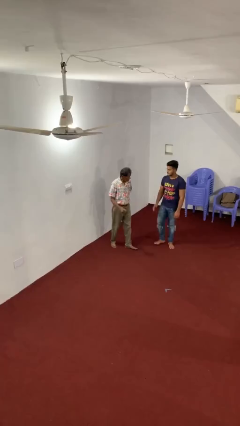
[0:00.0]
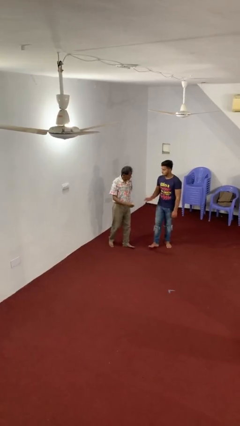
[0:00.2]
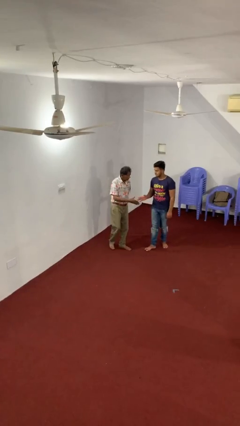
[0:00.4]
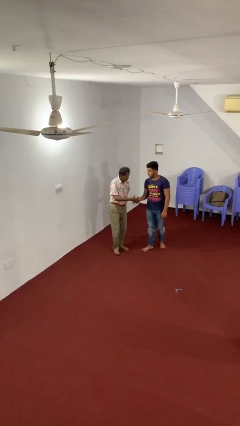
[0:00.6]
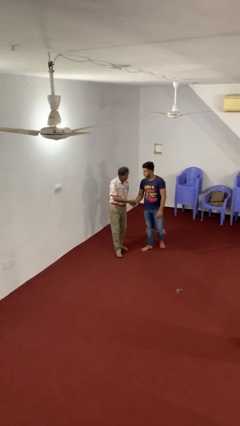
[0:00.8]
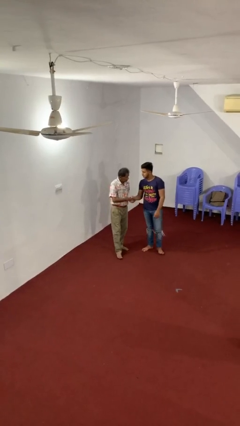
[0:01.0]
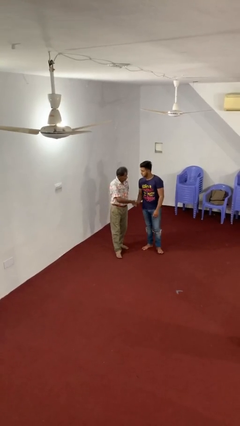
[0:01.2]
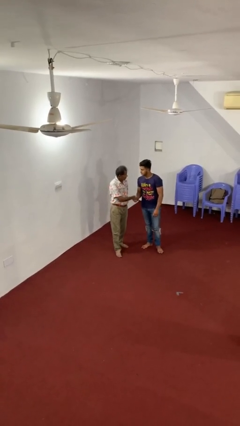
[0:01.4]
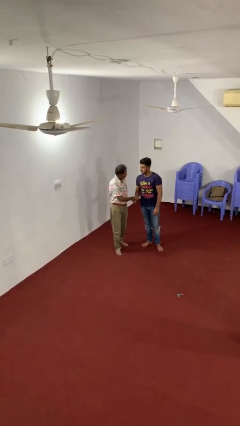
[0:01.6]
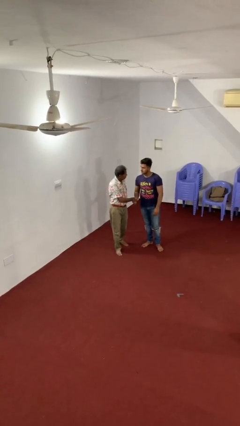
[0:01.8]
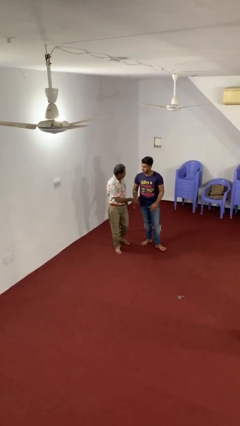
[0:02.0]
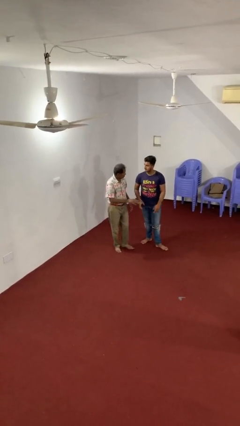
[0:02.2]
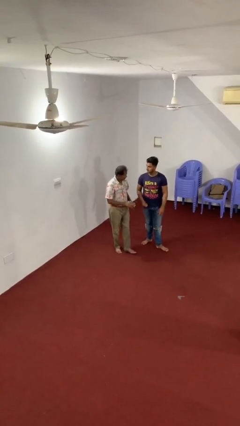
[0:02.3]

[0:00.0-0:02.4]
person shakes hand

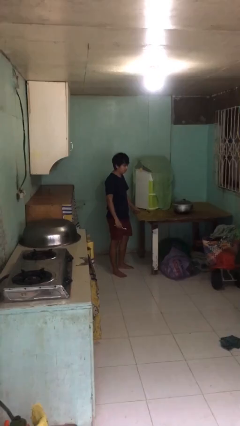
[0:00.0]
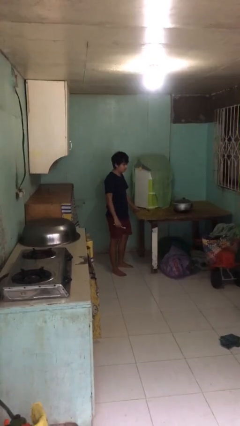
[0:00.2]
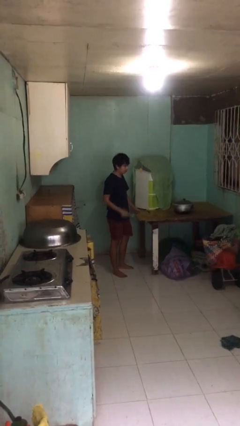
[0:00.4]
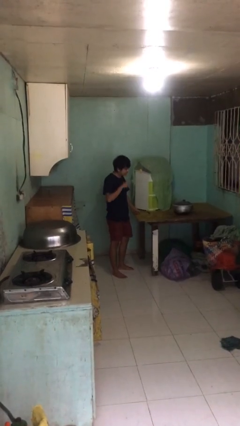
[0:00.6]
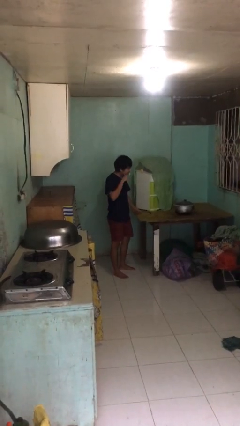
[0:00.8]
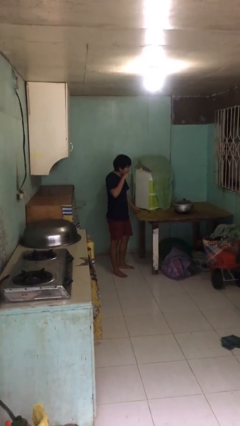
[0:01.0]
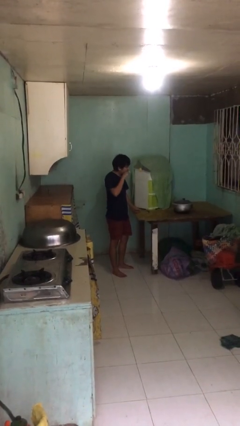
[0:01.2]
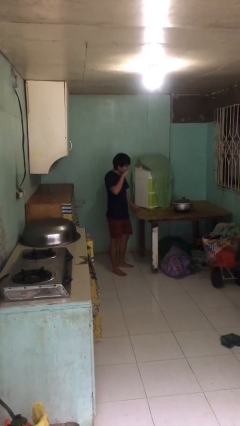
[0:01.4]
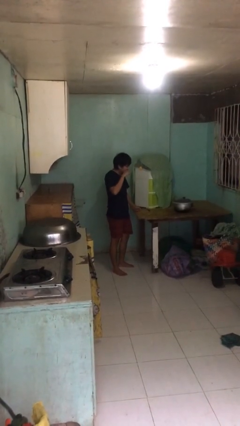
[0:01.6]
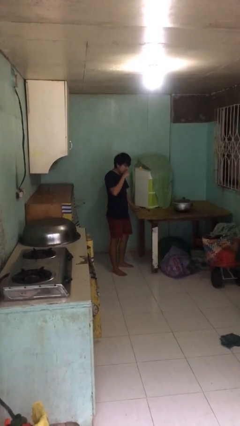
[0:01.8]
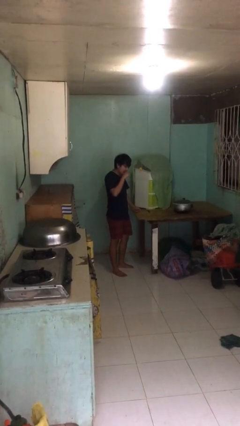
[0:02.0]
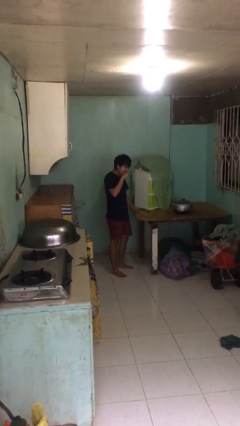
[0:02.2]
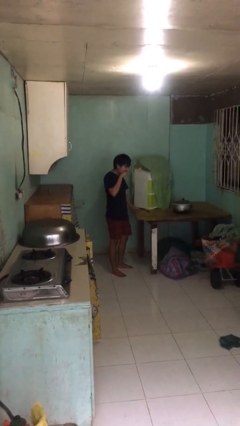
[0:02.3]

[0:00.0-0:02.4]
person brushes teeth

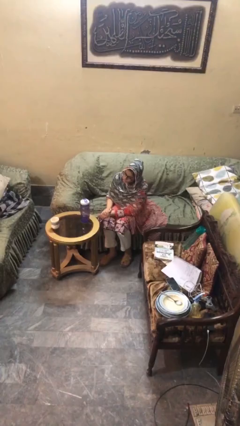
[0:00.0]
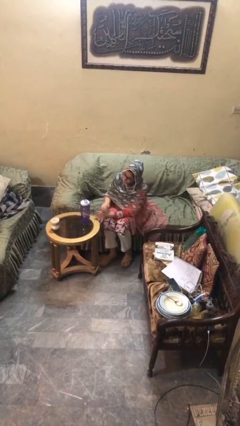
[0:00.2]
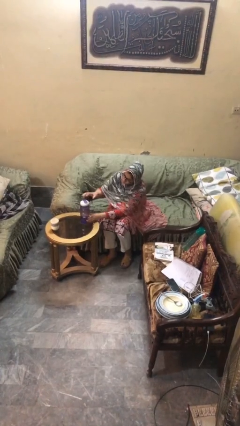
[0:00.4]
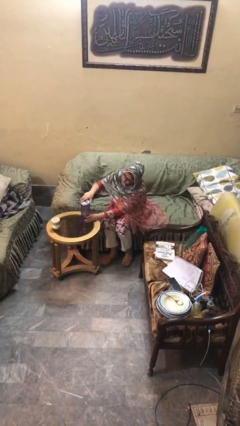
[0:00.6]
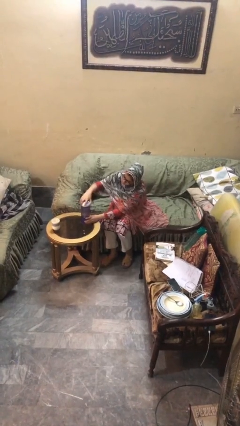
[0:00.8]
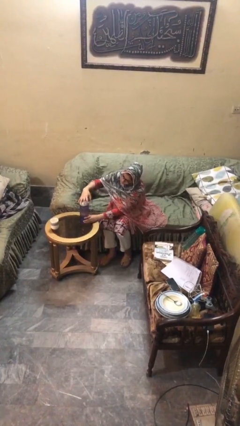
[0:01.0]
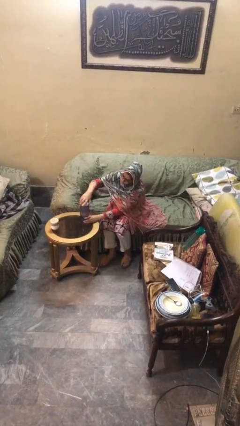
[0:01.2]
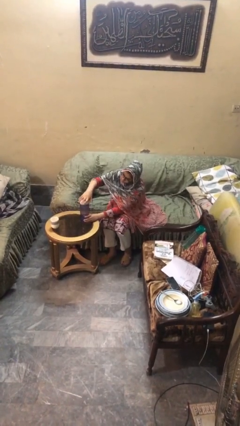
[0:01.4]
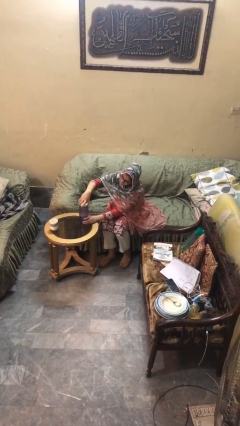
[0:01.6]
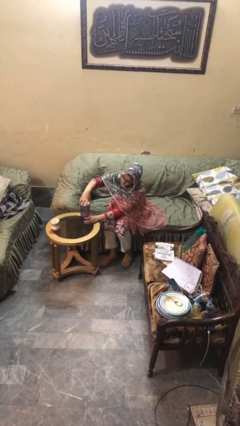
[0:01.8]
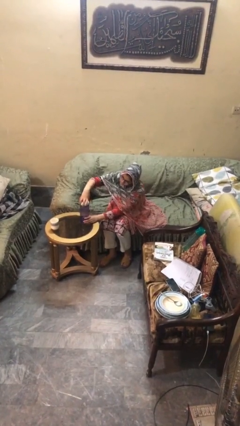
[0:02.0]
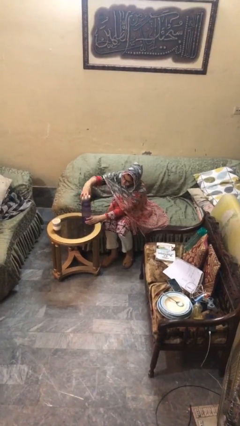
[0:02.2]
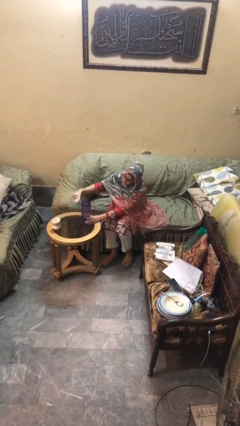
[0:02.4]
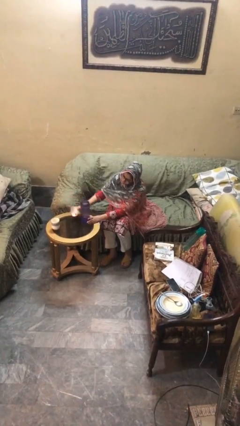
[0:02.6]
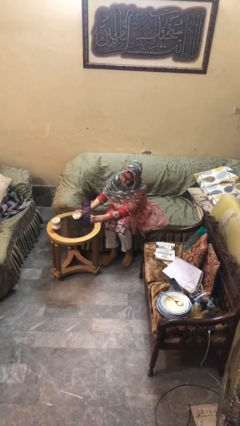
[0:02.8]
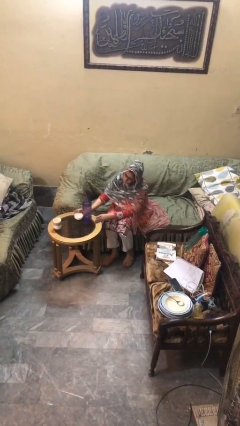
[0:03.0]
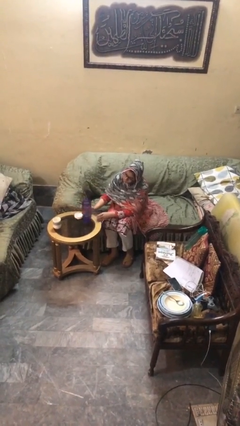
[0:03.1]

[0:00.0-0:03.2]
person unscrews lid from bottle

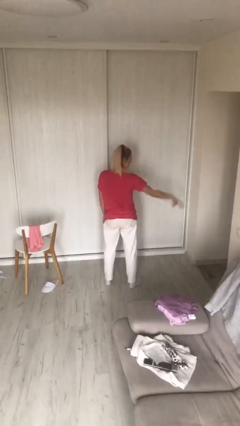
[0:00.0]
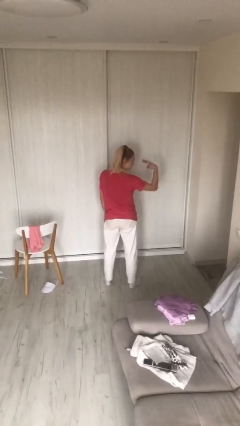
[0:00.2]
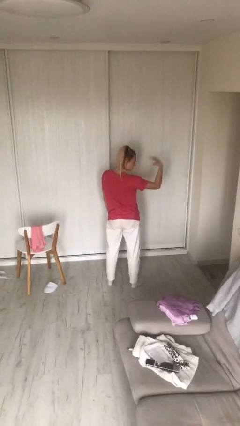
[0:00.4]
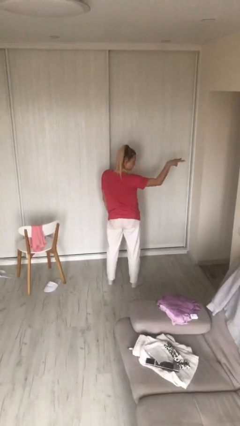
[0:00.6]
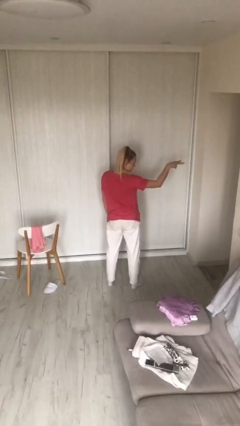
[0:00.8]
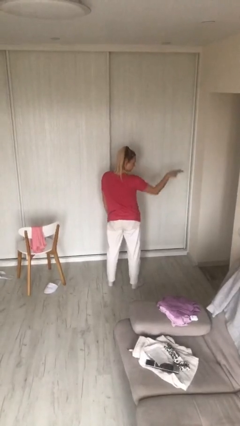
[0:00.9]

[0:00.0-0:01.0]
person gestures watch closely

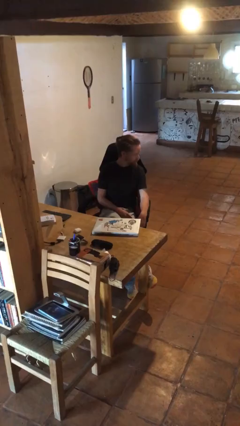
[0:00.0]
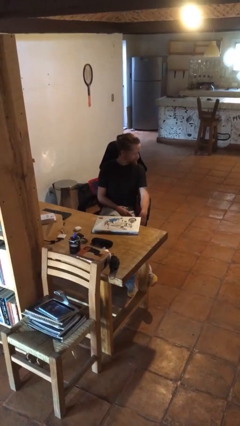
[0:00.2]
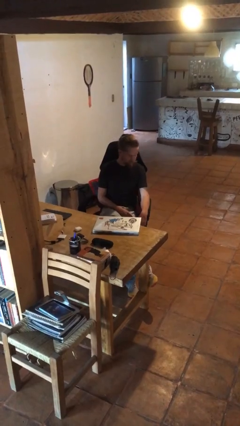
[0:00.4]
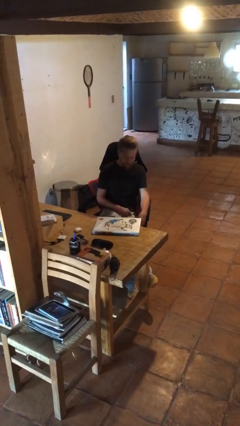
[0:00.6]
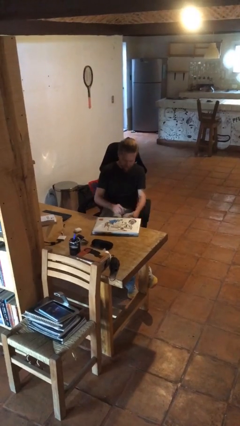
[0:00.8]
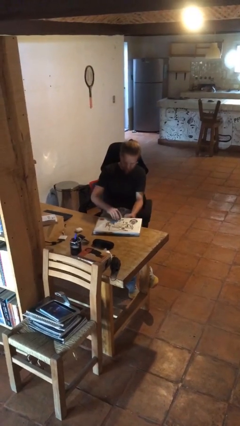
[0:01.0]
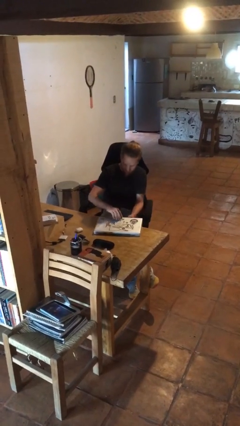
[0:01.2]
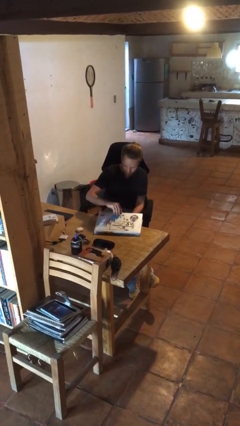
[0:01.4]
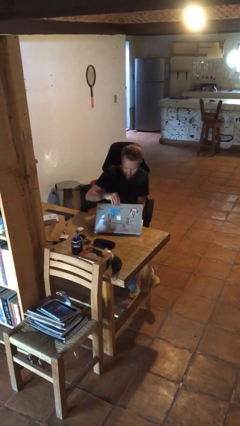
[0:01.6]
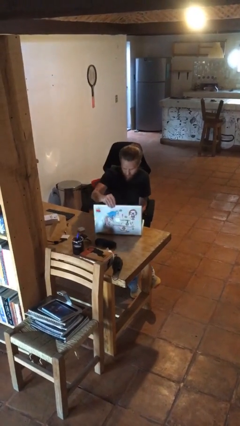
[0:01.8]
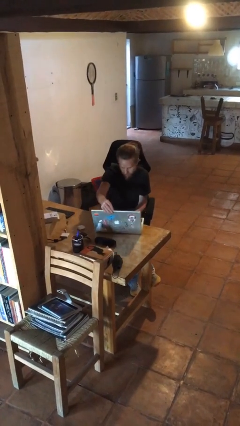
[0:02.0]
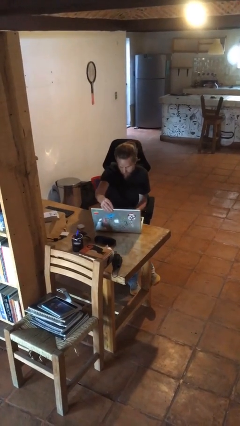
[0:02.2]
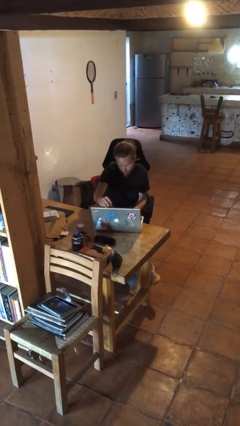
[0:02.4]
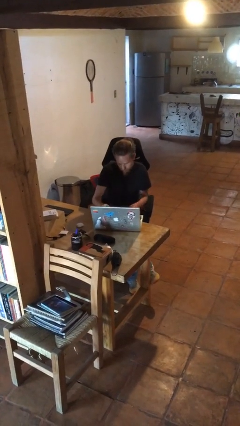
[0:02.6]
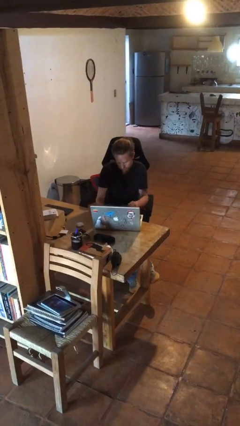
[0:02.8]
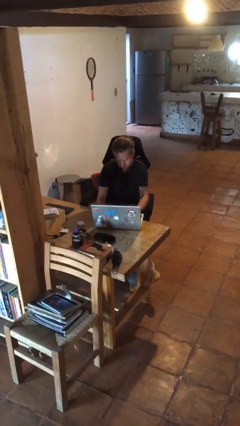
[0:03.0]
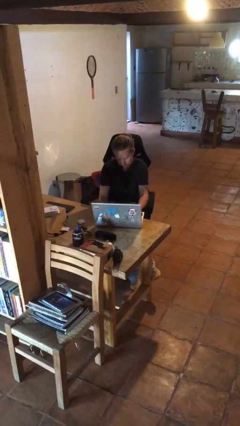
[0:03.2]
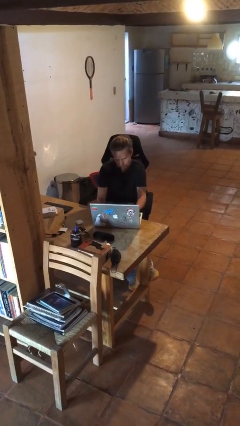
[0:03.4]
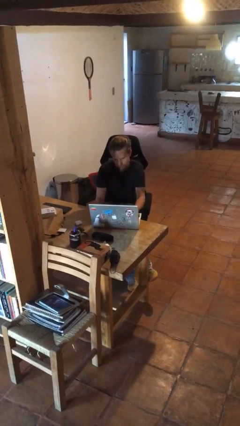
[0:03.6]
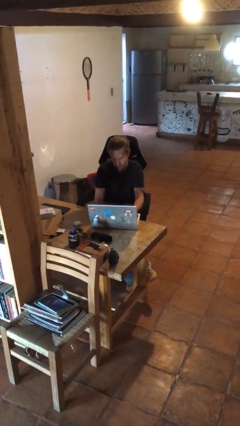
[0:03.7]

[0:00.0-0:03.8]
person opens laptop

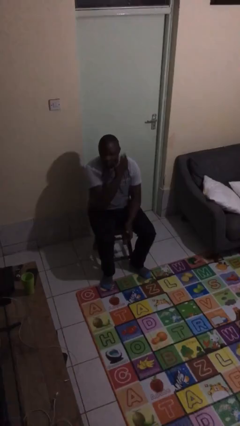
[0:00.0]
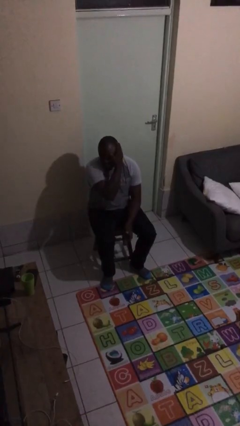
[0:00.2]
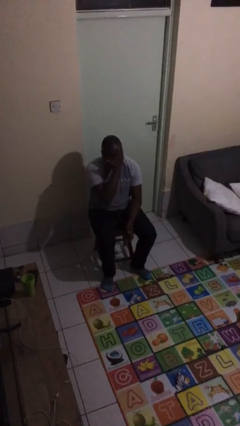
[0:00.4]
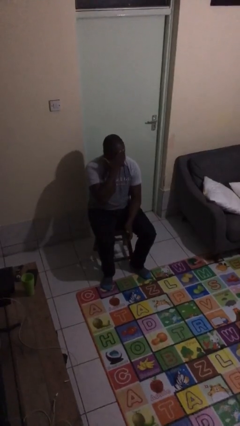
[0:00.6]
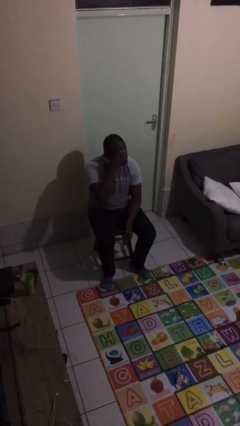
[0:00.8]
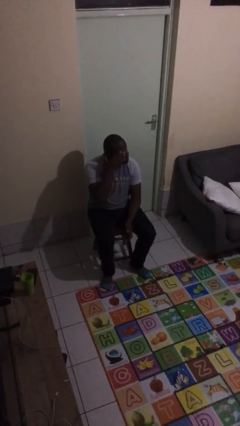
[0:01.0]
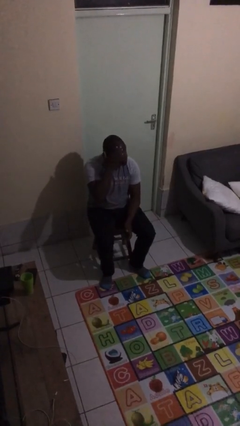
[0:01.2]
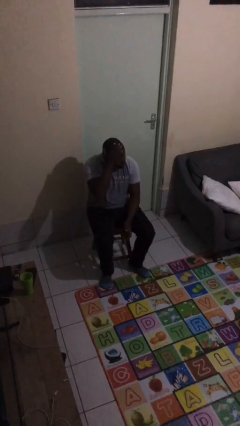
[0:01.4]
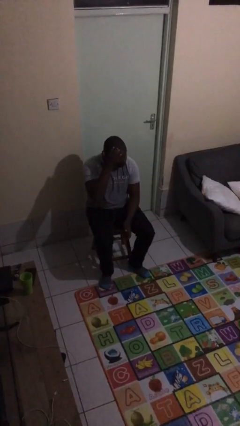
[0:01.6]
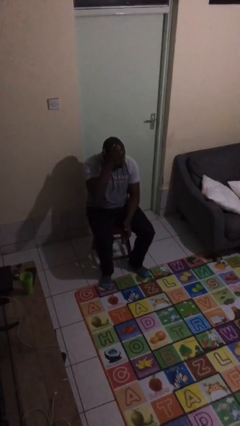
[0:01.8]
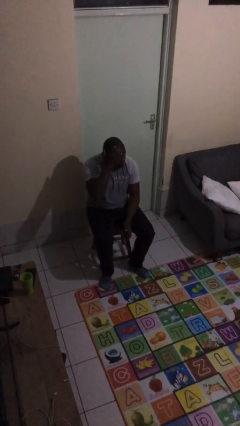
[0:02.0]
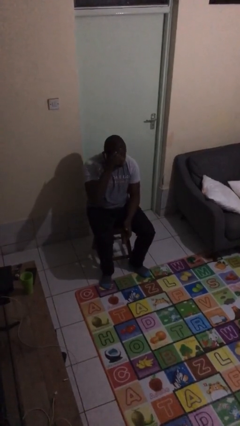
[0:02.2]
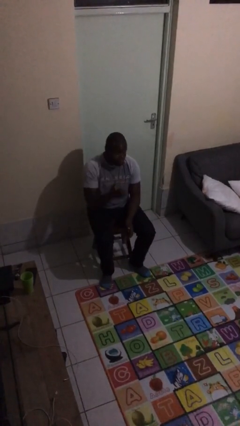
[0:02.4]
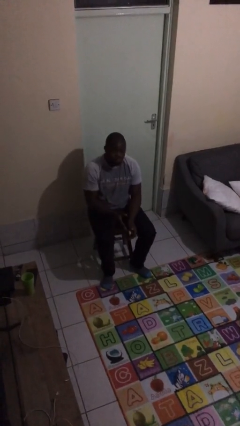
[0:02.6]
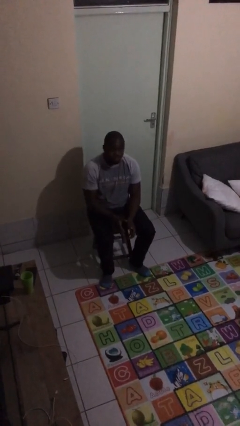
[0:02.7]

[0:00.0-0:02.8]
person scratches face

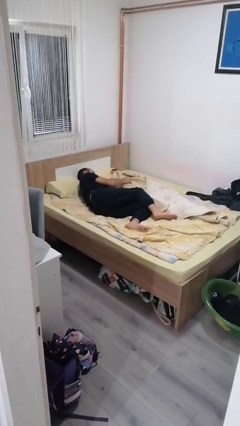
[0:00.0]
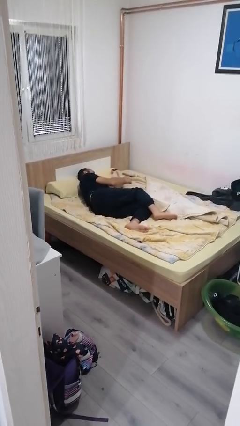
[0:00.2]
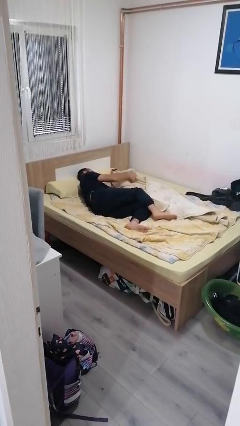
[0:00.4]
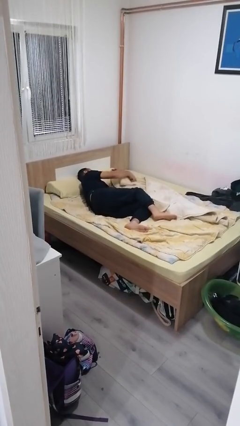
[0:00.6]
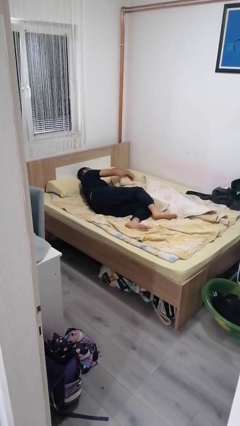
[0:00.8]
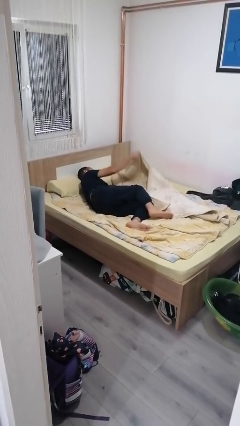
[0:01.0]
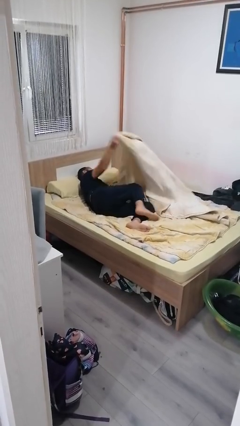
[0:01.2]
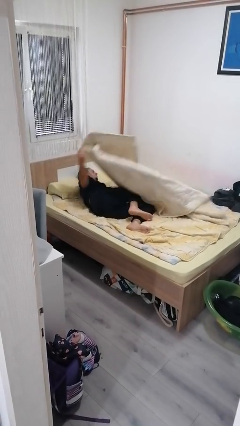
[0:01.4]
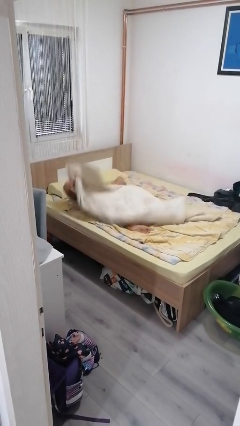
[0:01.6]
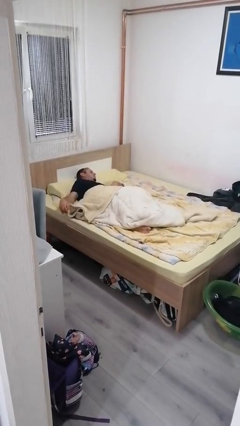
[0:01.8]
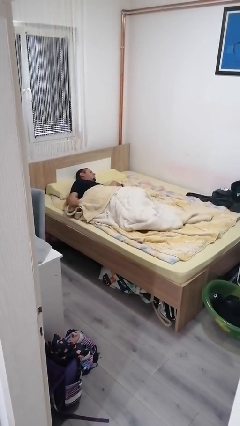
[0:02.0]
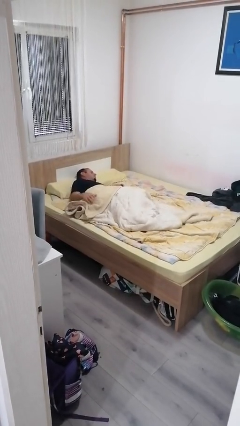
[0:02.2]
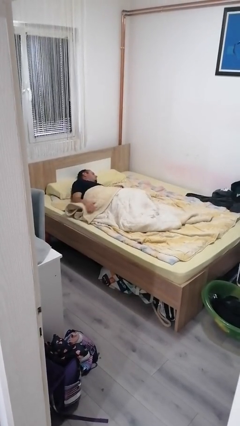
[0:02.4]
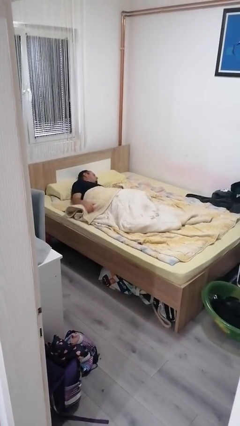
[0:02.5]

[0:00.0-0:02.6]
person covers with bedsheets
